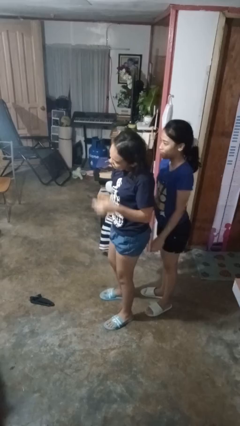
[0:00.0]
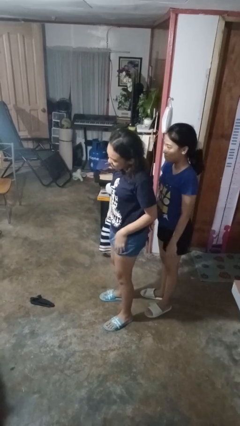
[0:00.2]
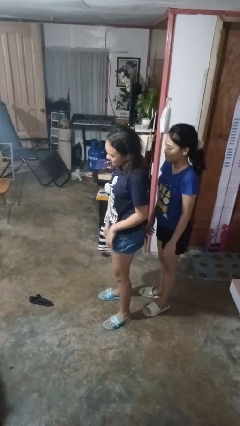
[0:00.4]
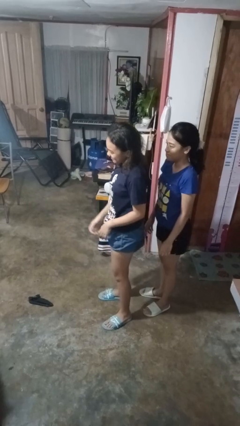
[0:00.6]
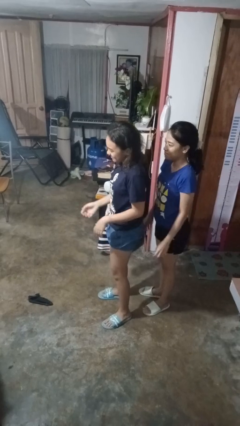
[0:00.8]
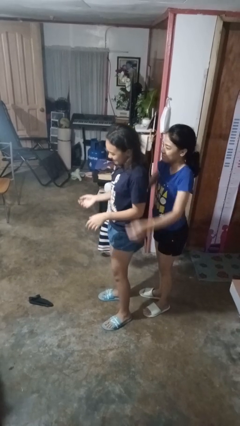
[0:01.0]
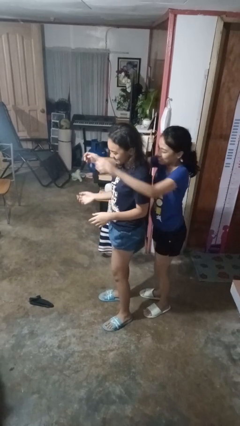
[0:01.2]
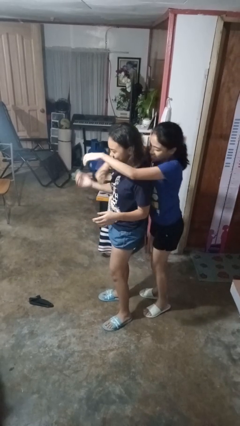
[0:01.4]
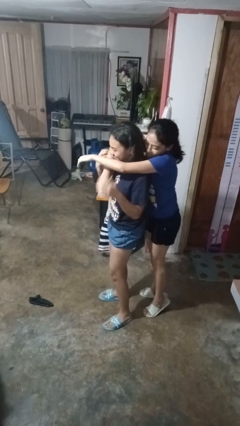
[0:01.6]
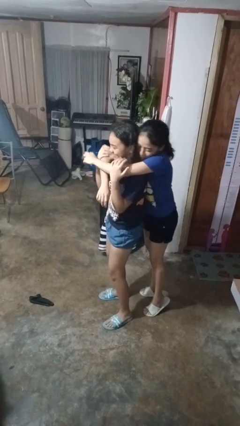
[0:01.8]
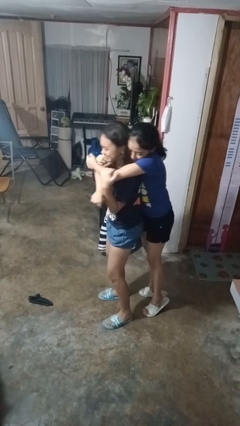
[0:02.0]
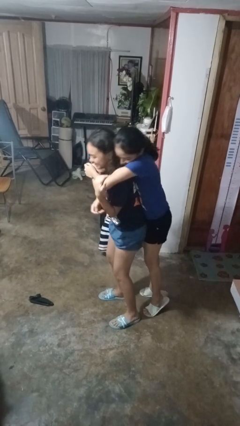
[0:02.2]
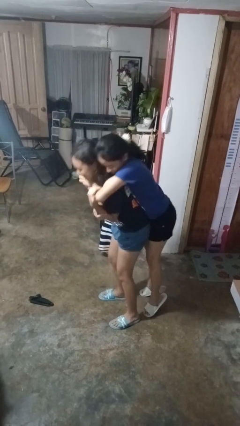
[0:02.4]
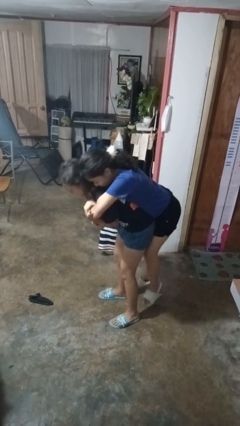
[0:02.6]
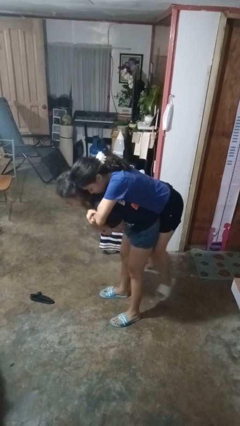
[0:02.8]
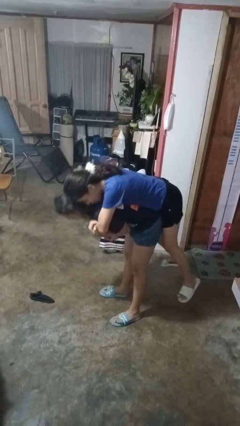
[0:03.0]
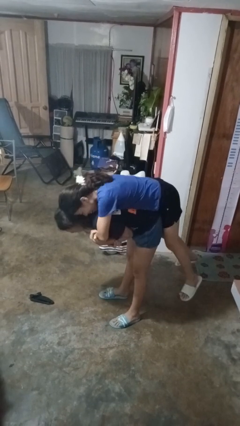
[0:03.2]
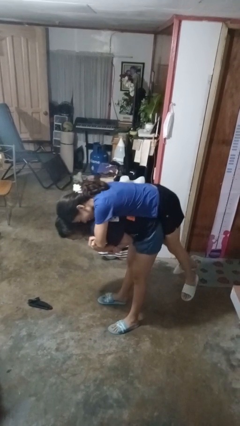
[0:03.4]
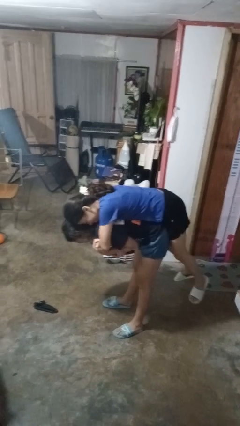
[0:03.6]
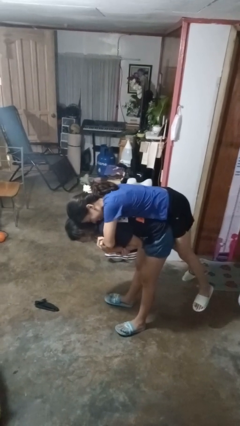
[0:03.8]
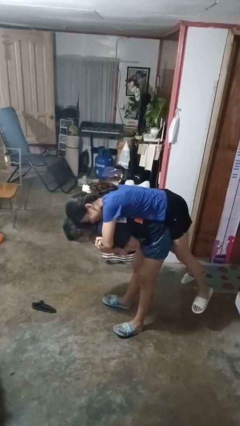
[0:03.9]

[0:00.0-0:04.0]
person picks up person

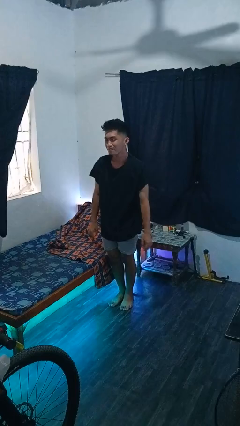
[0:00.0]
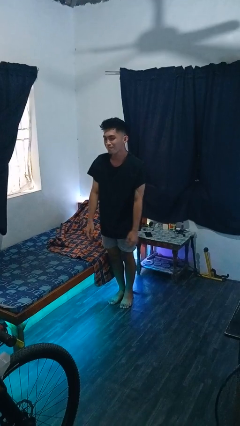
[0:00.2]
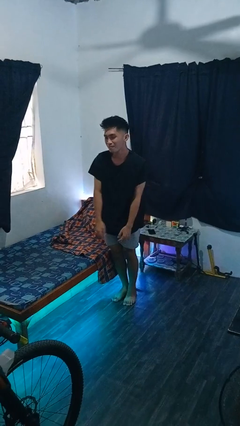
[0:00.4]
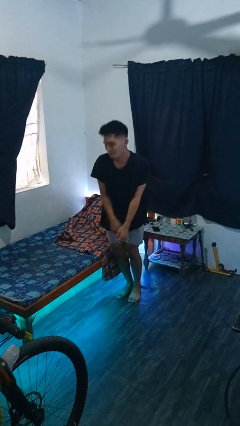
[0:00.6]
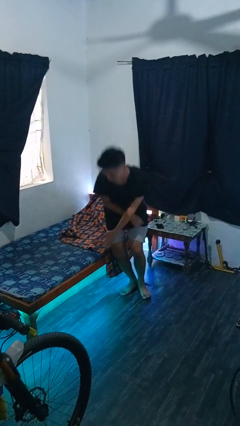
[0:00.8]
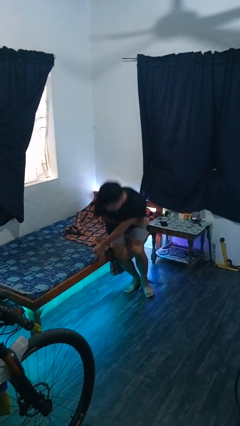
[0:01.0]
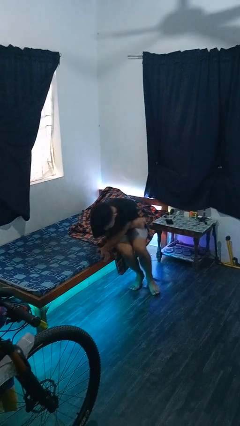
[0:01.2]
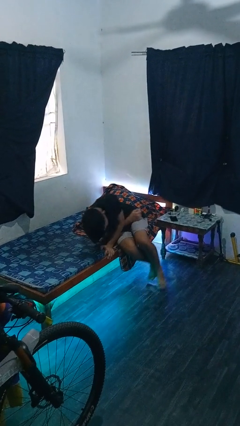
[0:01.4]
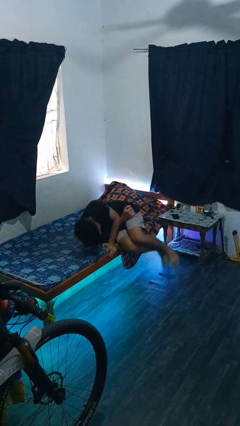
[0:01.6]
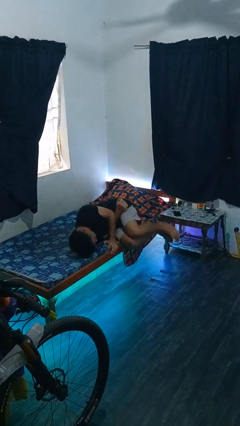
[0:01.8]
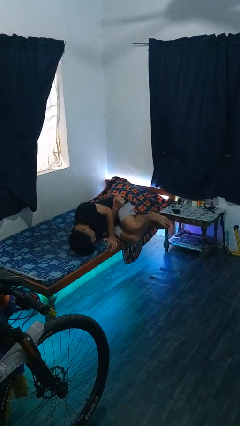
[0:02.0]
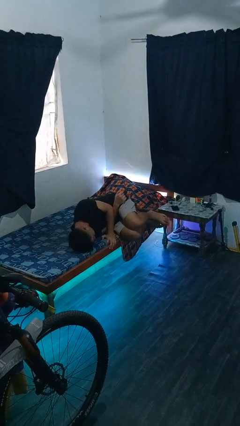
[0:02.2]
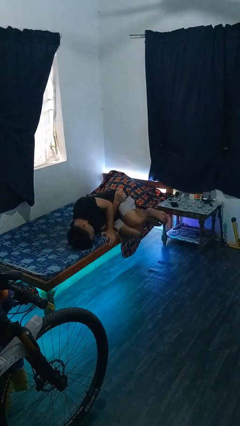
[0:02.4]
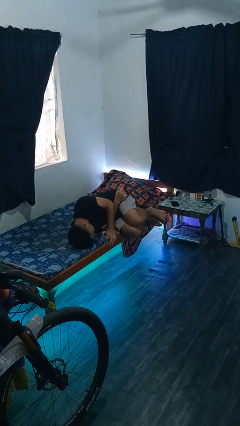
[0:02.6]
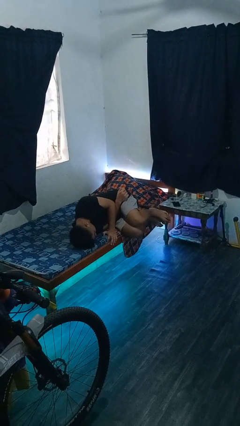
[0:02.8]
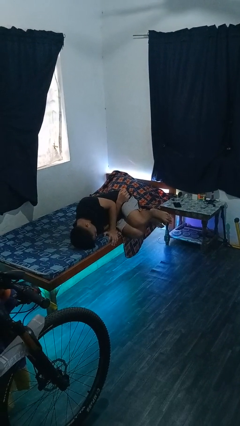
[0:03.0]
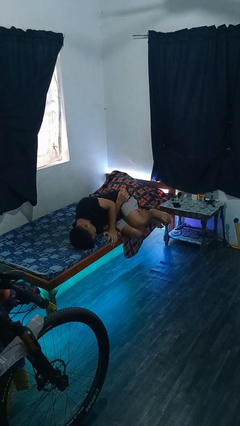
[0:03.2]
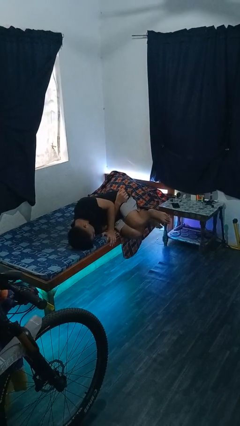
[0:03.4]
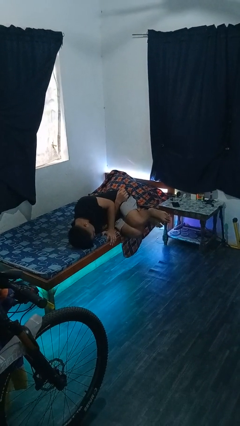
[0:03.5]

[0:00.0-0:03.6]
person lies down on bed

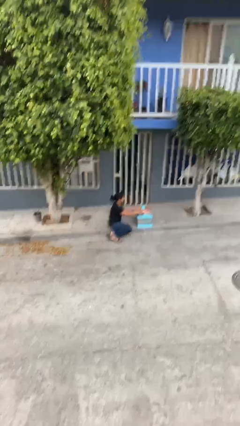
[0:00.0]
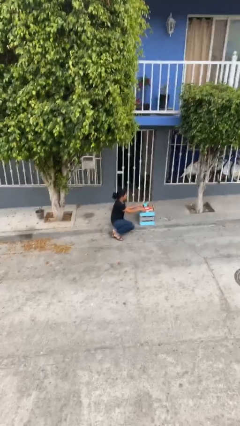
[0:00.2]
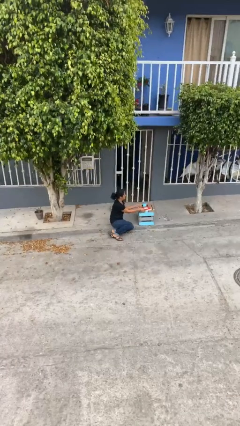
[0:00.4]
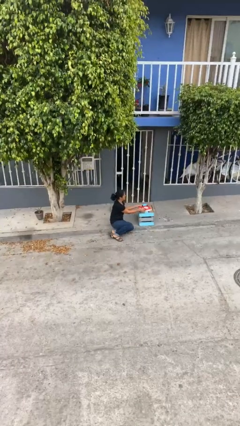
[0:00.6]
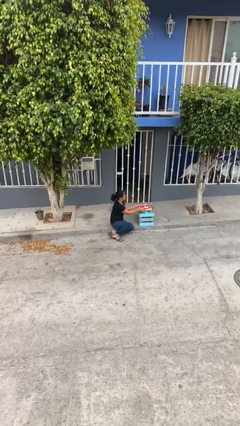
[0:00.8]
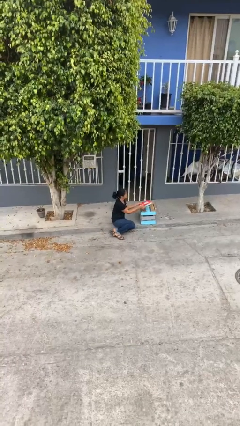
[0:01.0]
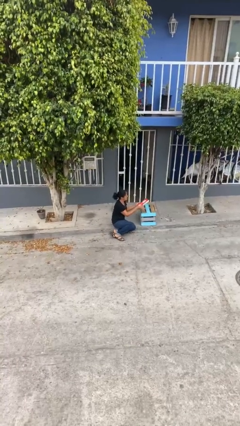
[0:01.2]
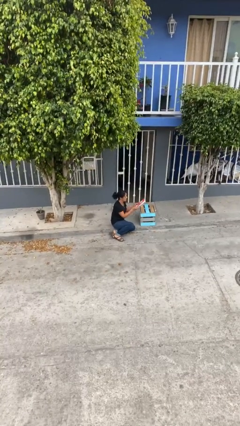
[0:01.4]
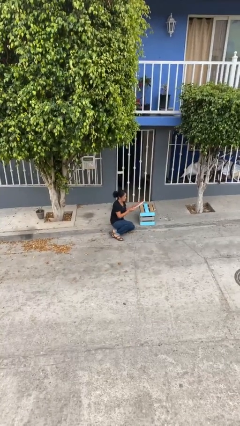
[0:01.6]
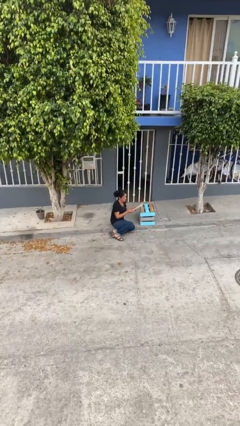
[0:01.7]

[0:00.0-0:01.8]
person picks up object from table

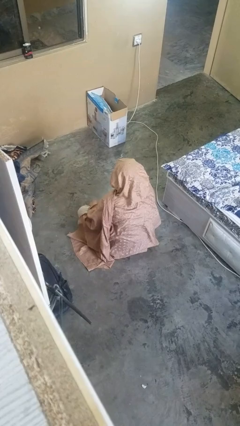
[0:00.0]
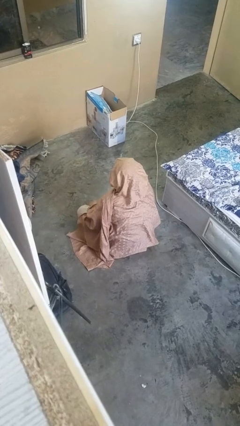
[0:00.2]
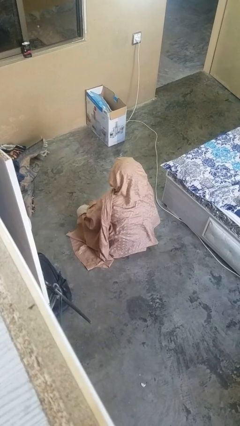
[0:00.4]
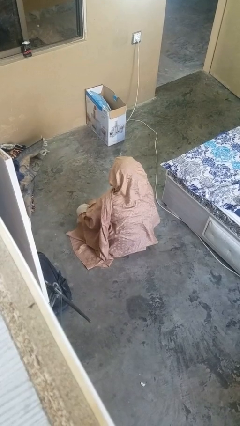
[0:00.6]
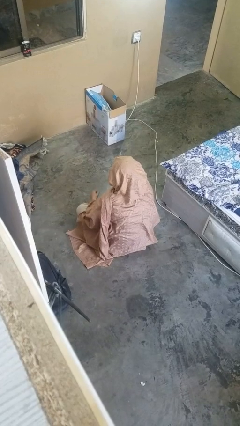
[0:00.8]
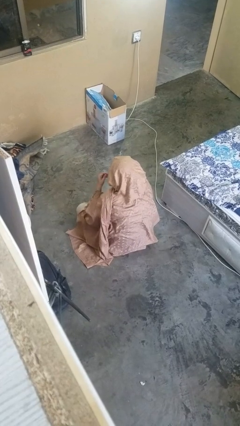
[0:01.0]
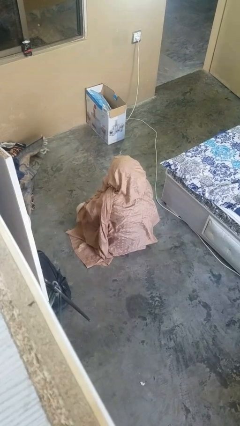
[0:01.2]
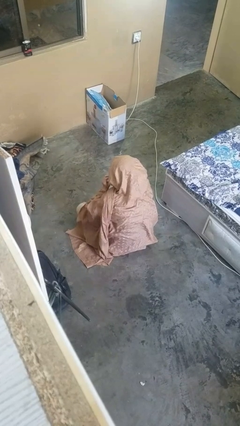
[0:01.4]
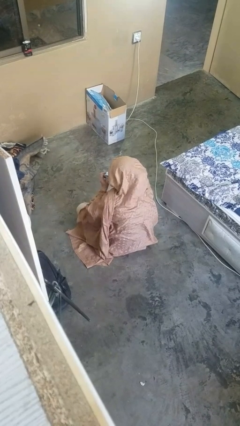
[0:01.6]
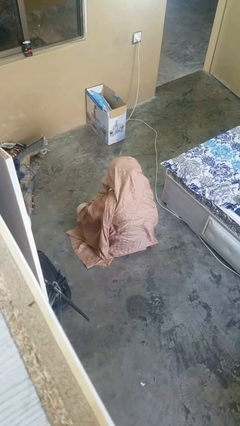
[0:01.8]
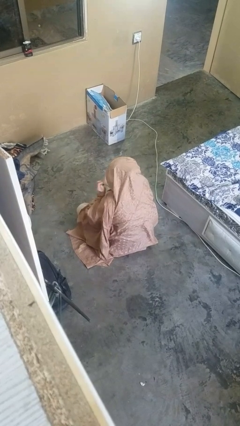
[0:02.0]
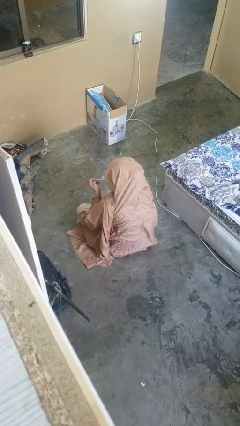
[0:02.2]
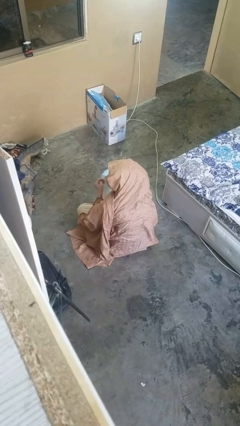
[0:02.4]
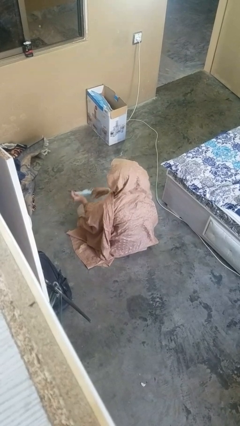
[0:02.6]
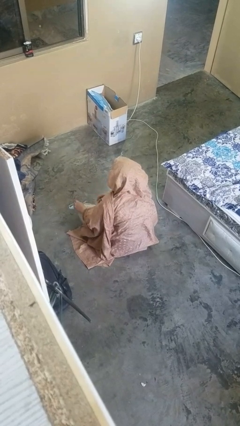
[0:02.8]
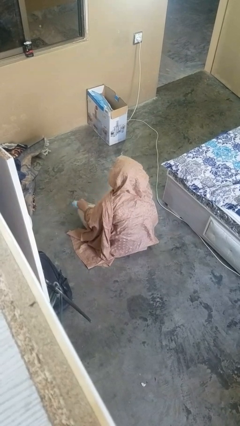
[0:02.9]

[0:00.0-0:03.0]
person takes off facemask

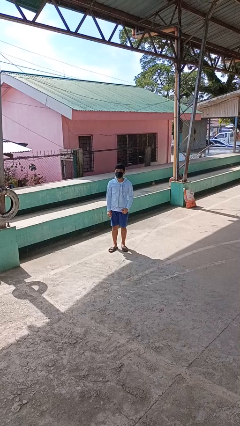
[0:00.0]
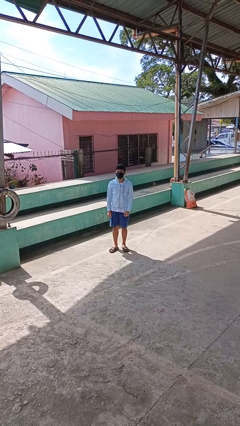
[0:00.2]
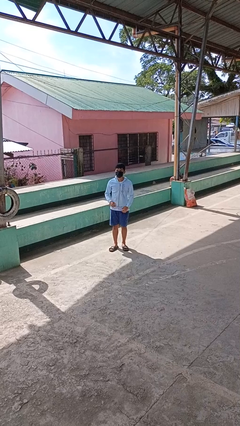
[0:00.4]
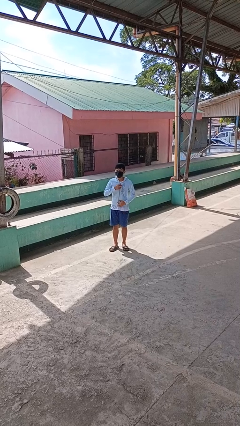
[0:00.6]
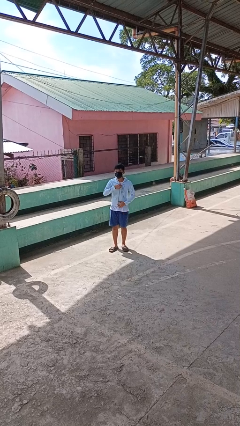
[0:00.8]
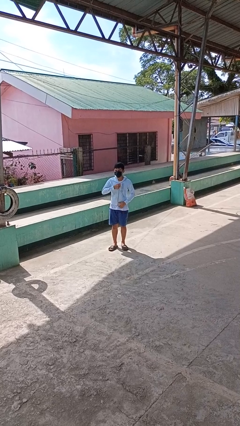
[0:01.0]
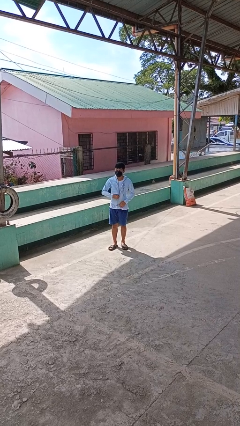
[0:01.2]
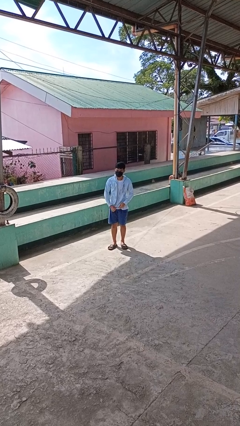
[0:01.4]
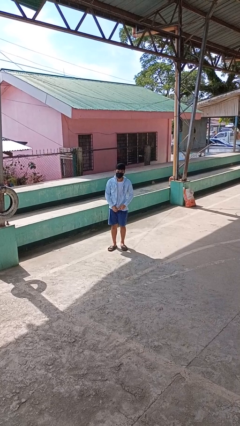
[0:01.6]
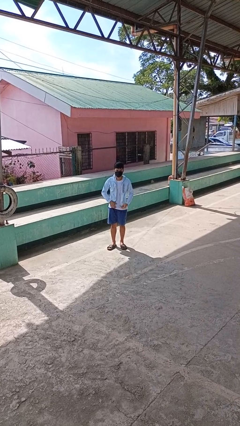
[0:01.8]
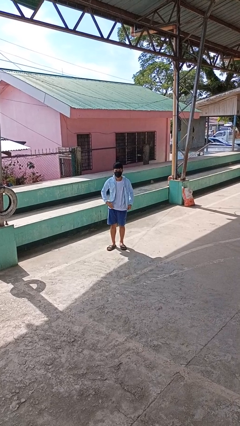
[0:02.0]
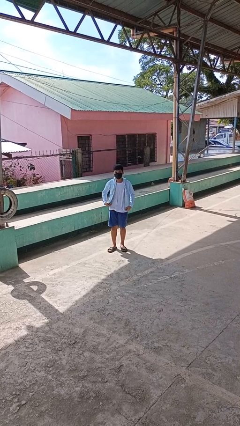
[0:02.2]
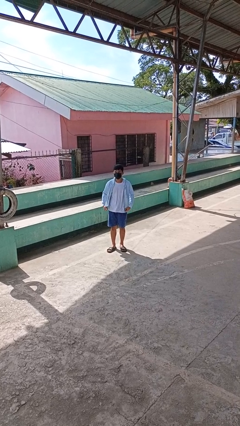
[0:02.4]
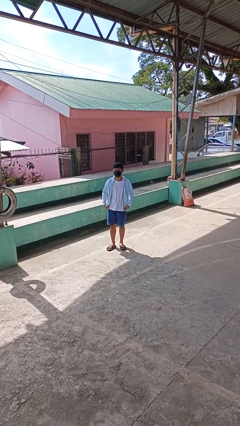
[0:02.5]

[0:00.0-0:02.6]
person unzips jacket

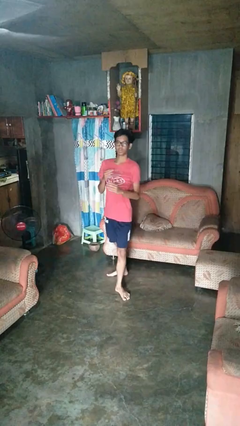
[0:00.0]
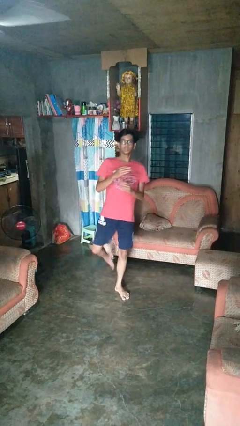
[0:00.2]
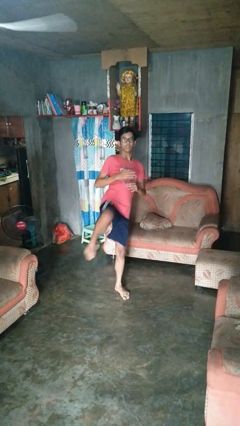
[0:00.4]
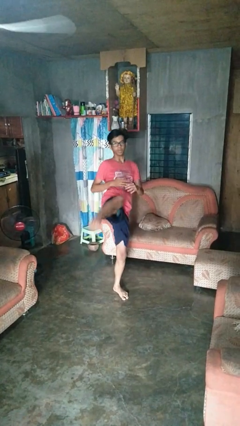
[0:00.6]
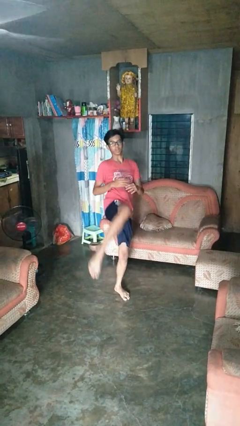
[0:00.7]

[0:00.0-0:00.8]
person karate kicks

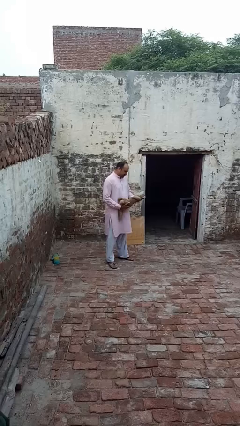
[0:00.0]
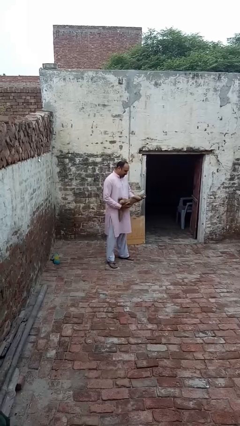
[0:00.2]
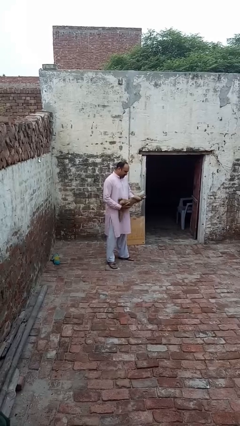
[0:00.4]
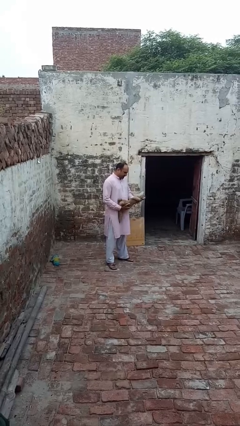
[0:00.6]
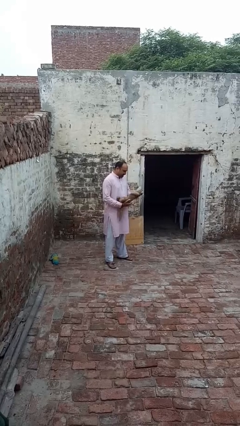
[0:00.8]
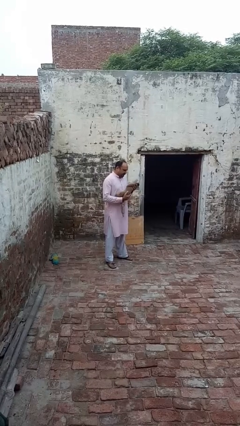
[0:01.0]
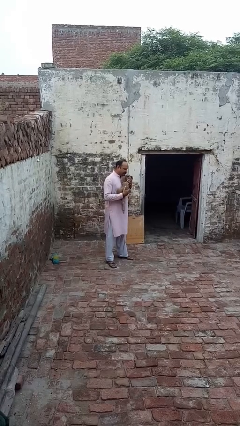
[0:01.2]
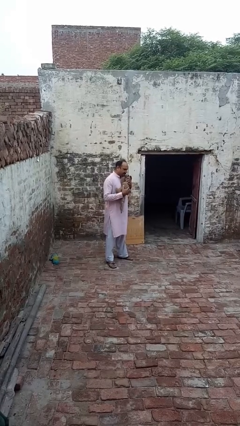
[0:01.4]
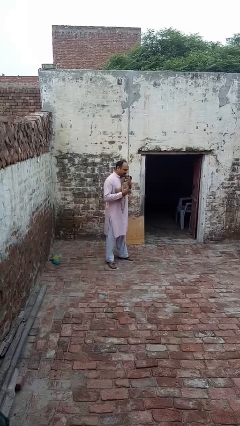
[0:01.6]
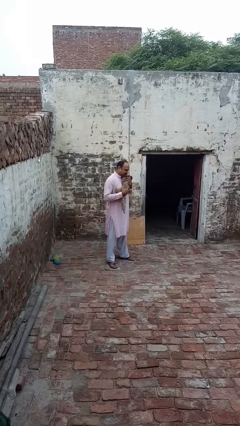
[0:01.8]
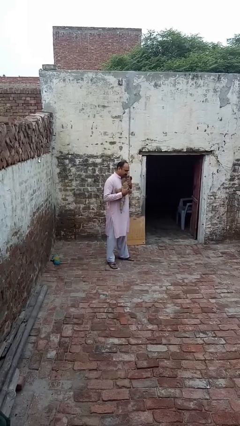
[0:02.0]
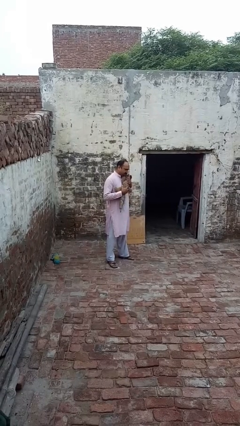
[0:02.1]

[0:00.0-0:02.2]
person hugs stuffed animal
